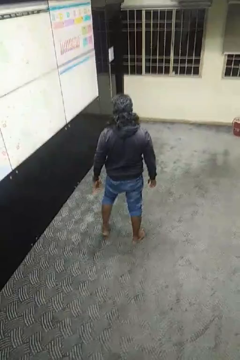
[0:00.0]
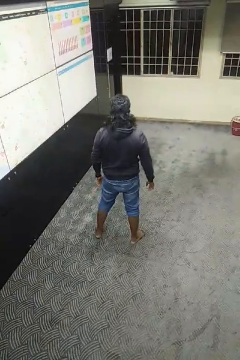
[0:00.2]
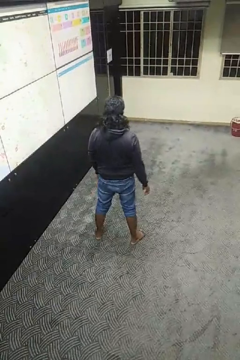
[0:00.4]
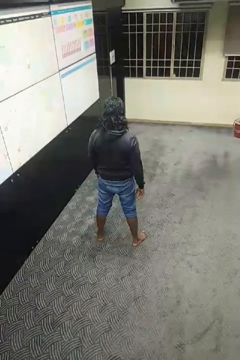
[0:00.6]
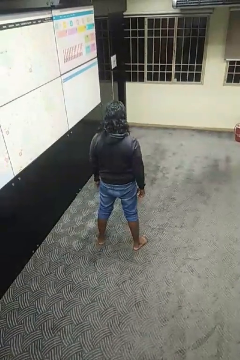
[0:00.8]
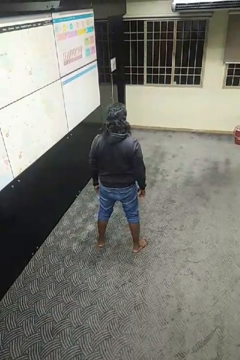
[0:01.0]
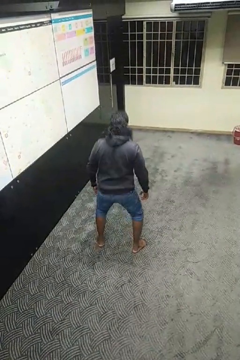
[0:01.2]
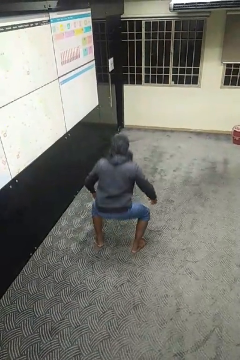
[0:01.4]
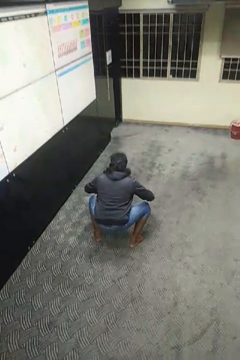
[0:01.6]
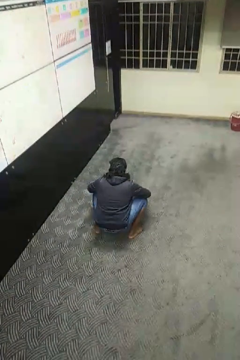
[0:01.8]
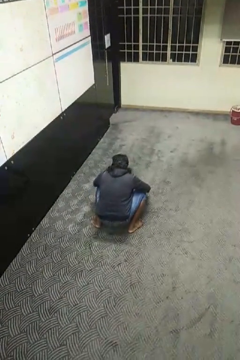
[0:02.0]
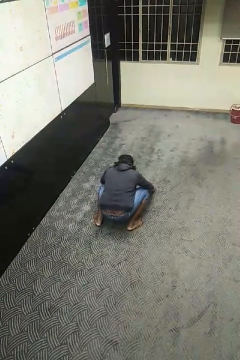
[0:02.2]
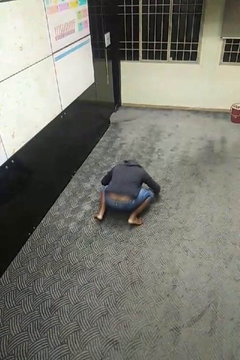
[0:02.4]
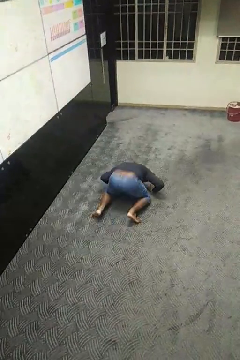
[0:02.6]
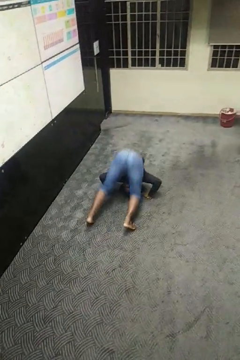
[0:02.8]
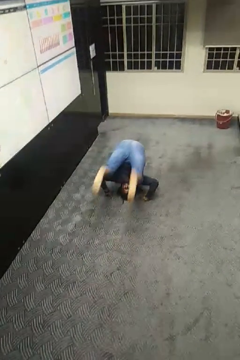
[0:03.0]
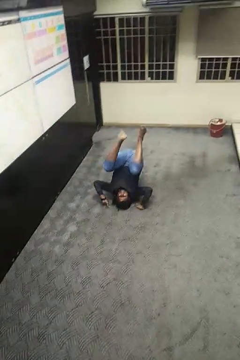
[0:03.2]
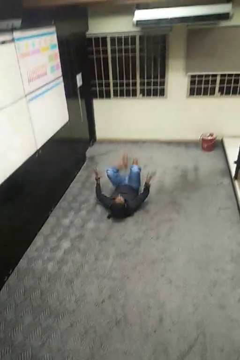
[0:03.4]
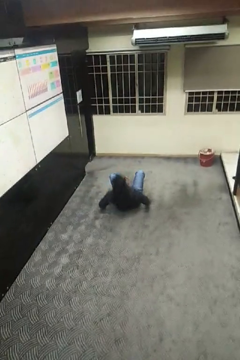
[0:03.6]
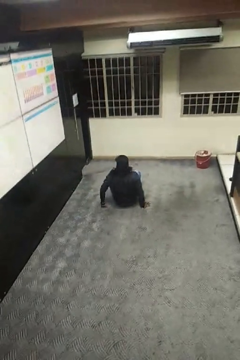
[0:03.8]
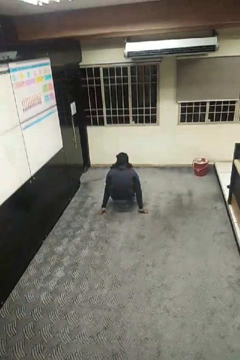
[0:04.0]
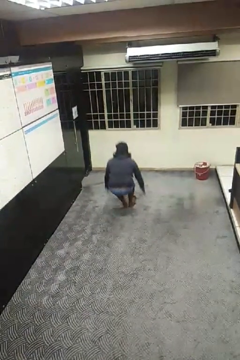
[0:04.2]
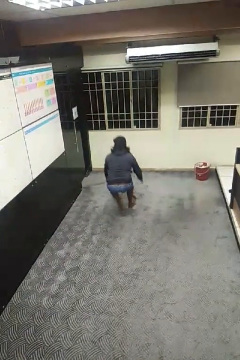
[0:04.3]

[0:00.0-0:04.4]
person somersaults

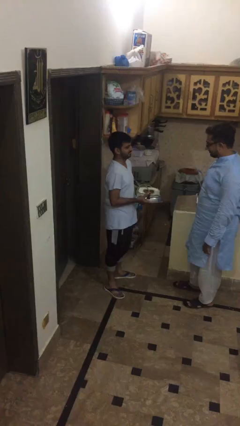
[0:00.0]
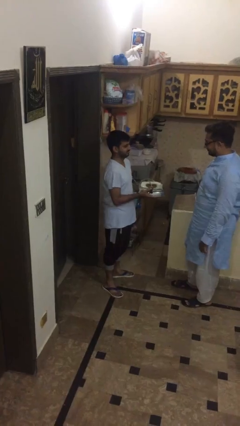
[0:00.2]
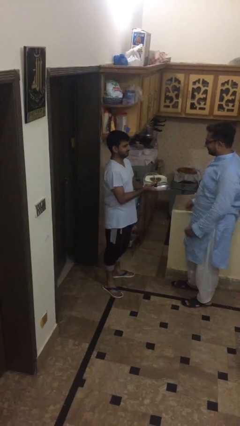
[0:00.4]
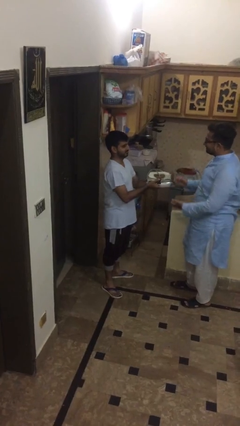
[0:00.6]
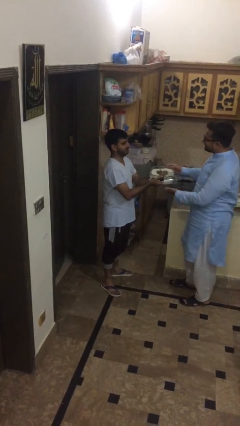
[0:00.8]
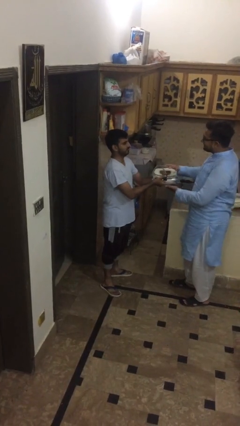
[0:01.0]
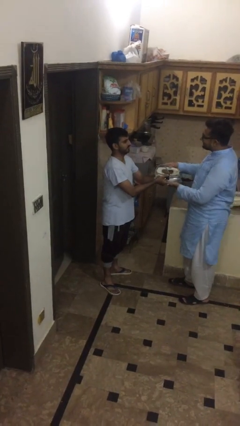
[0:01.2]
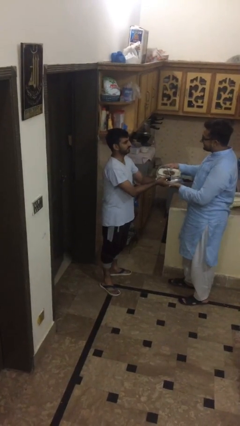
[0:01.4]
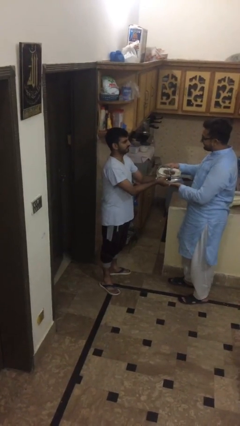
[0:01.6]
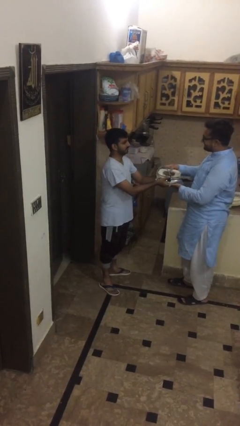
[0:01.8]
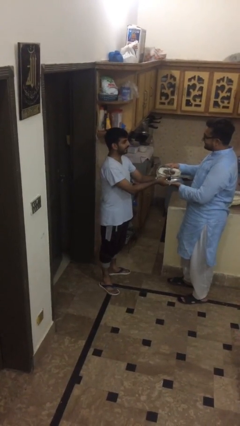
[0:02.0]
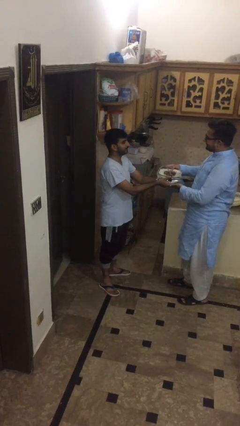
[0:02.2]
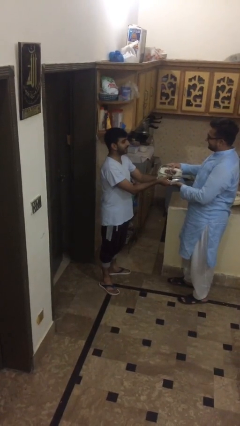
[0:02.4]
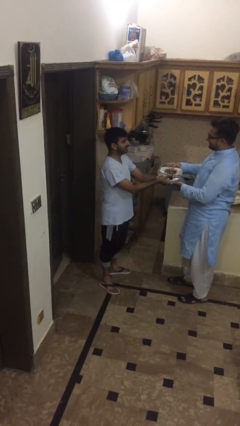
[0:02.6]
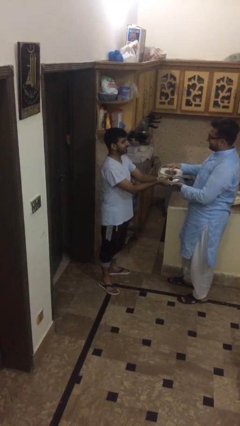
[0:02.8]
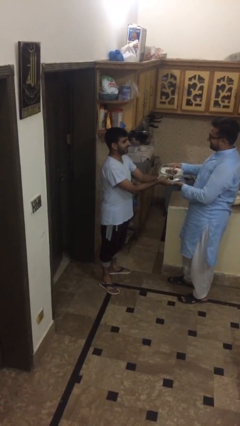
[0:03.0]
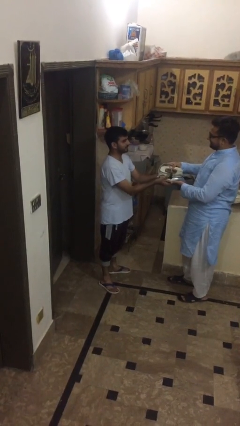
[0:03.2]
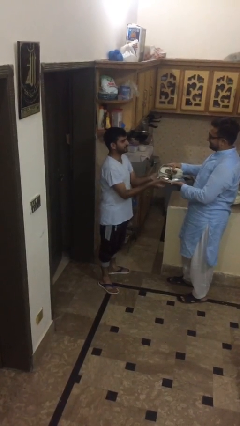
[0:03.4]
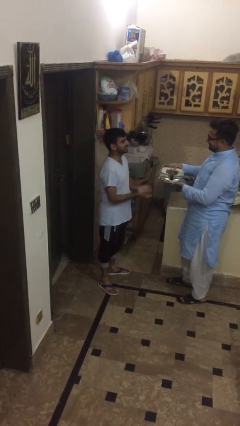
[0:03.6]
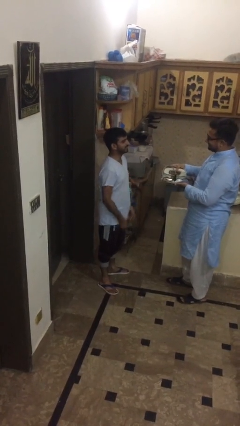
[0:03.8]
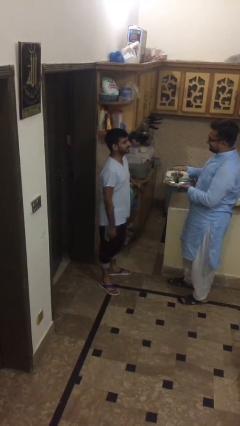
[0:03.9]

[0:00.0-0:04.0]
person transfers object to person

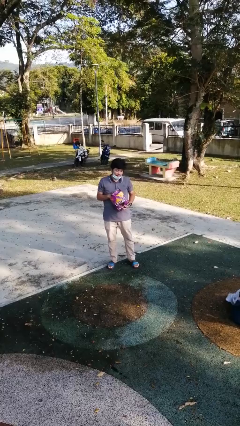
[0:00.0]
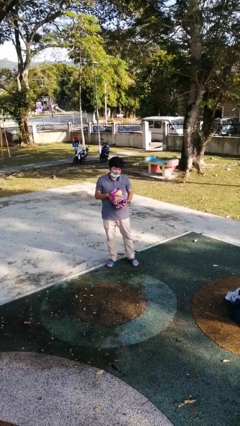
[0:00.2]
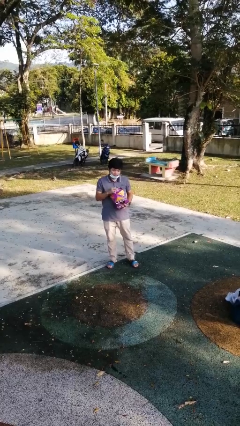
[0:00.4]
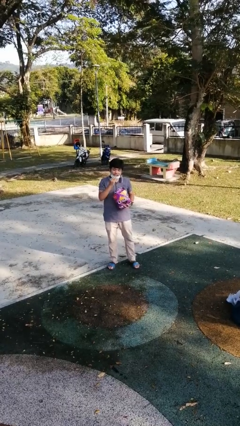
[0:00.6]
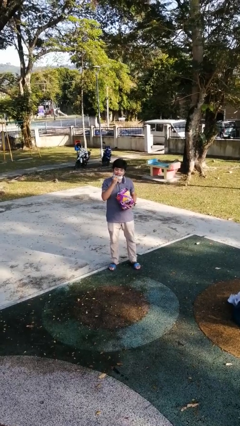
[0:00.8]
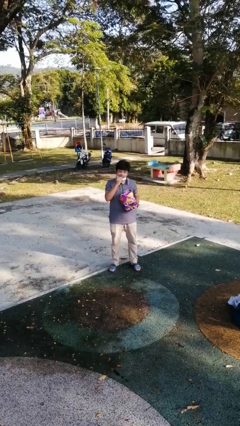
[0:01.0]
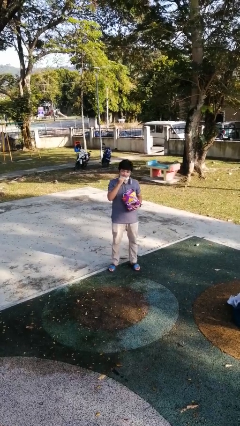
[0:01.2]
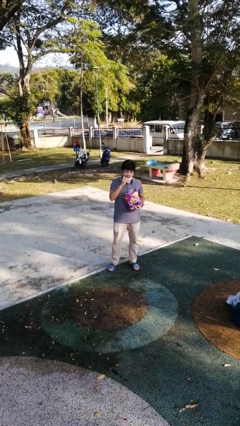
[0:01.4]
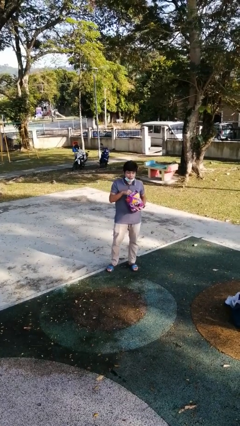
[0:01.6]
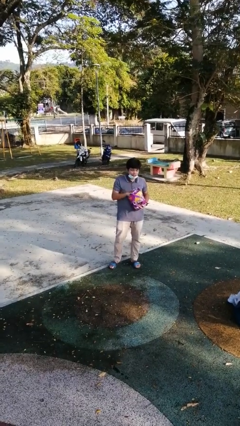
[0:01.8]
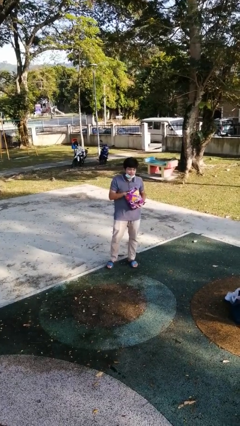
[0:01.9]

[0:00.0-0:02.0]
person eats snack from bag

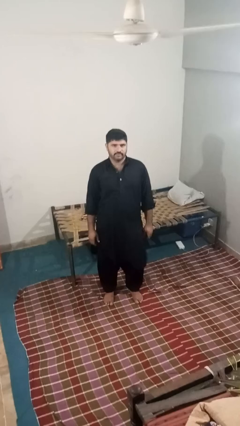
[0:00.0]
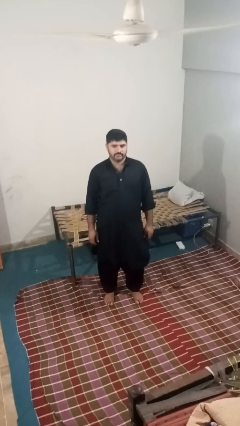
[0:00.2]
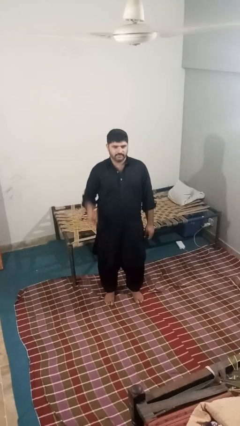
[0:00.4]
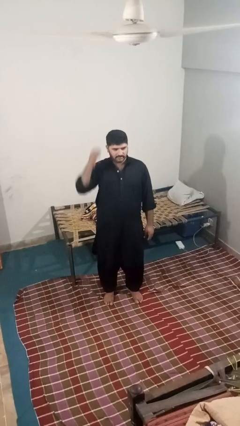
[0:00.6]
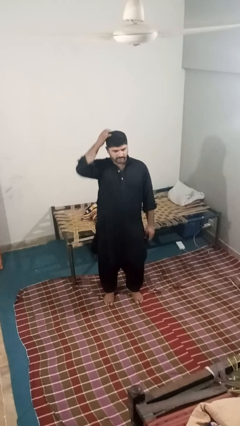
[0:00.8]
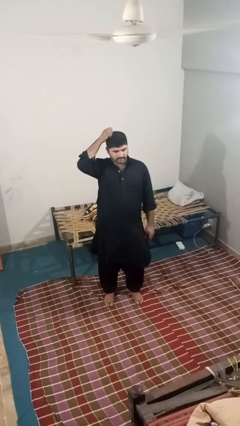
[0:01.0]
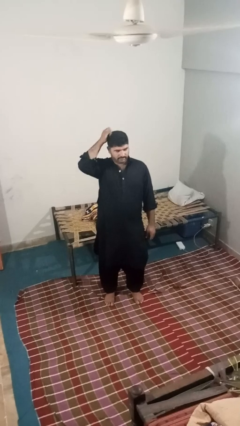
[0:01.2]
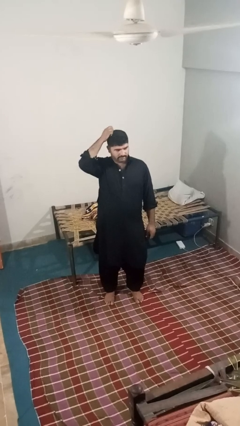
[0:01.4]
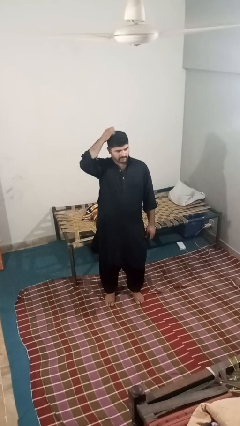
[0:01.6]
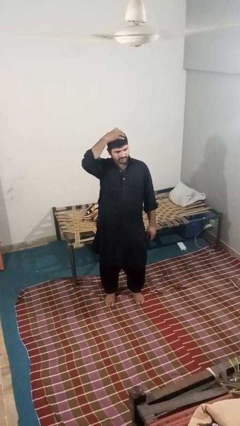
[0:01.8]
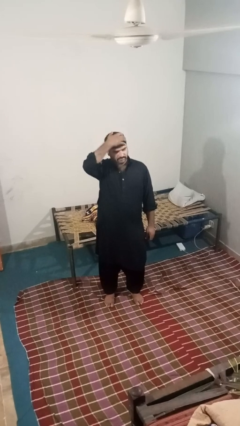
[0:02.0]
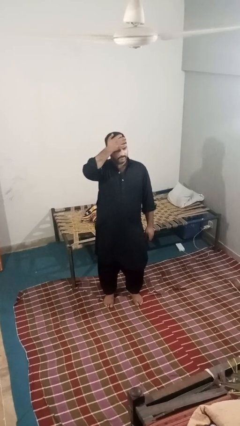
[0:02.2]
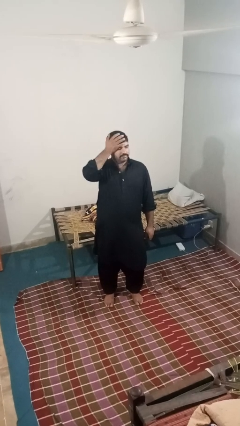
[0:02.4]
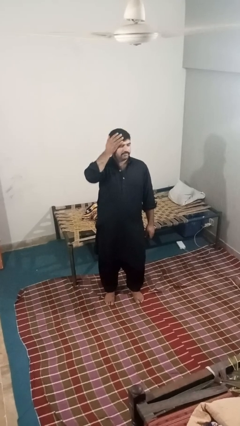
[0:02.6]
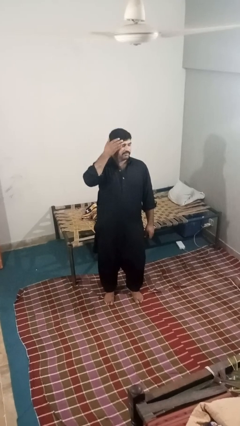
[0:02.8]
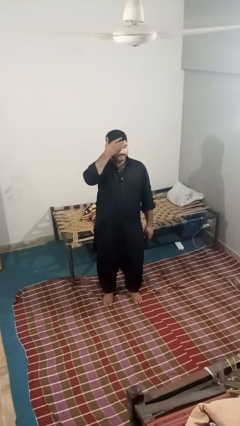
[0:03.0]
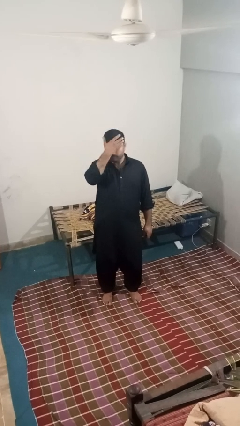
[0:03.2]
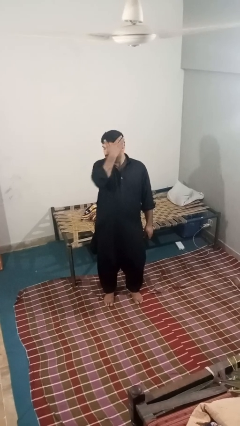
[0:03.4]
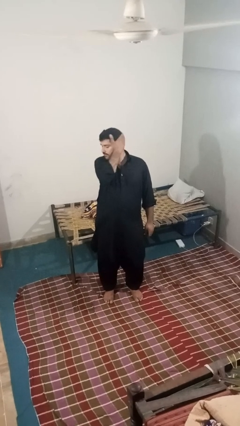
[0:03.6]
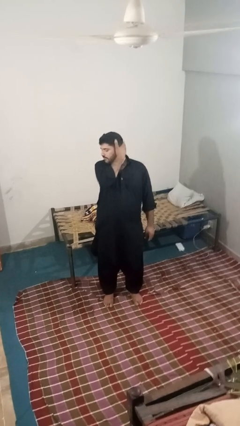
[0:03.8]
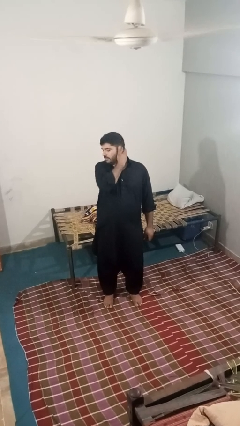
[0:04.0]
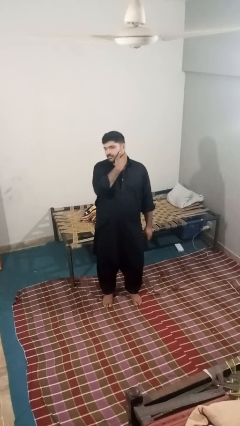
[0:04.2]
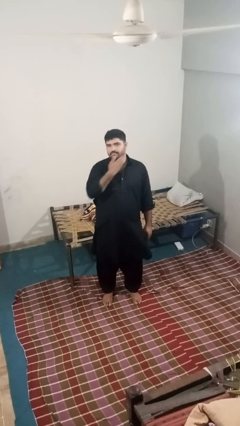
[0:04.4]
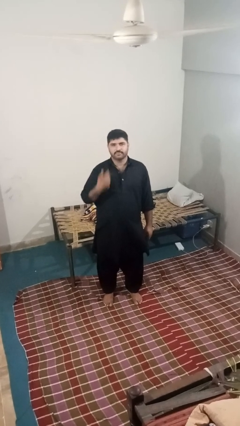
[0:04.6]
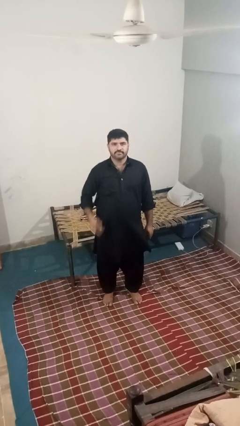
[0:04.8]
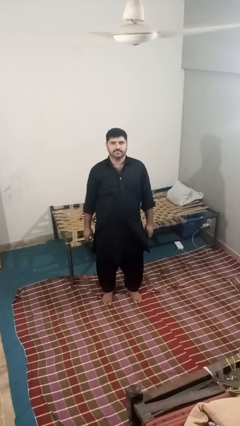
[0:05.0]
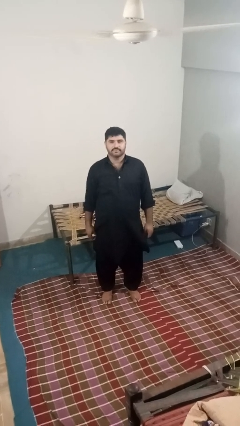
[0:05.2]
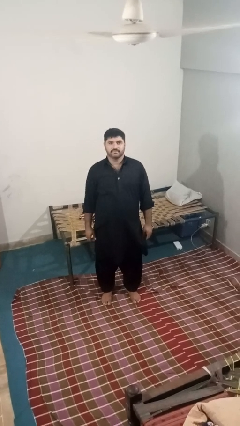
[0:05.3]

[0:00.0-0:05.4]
person scratches face

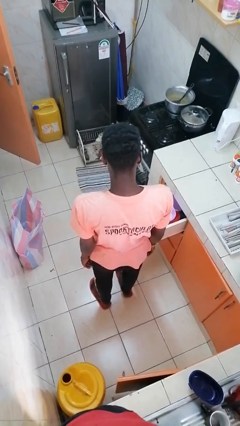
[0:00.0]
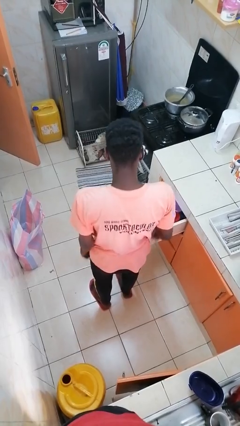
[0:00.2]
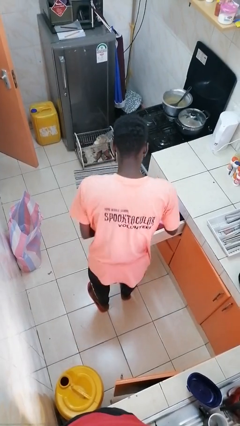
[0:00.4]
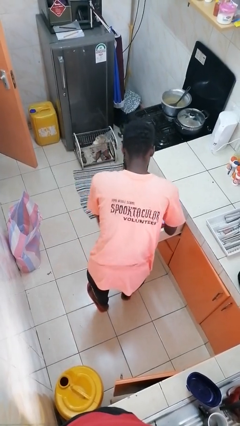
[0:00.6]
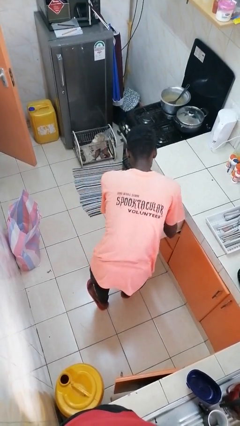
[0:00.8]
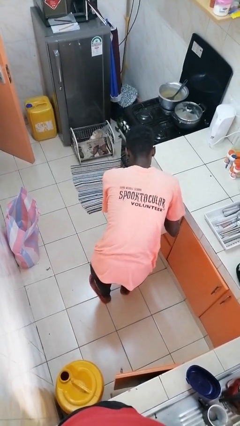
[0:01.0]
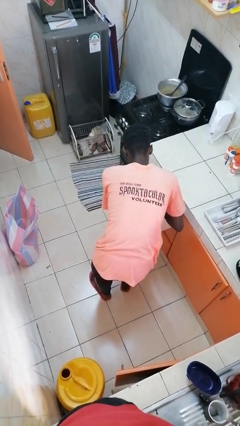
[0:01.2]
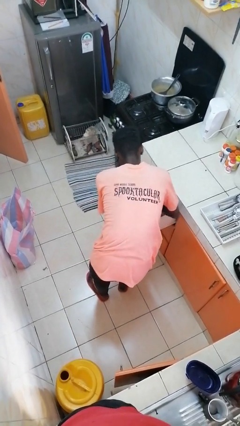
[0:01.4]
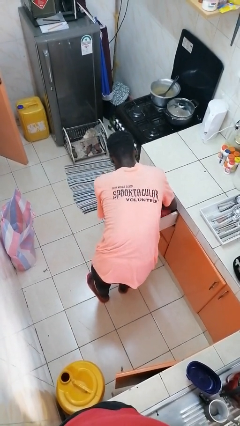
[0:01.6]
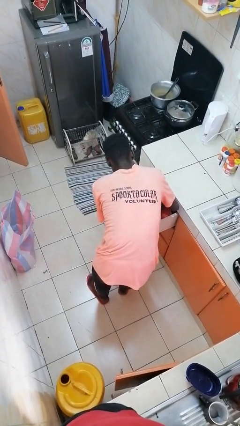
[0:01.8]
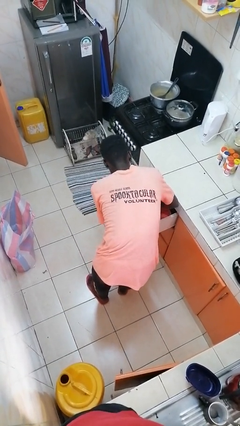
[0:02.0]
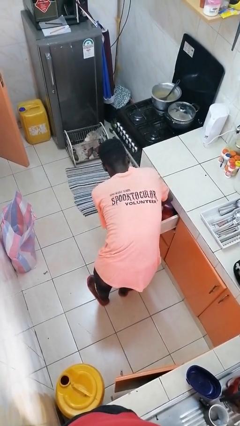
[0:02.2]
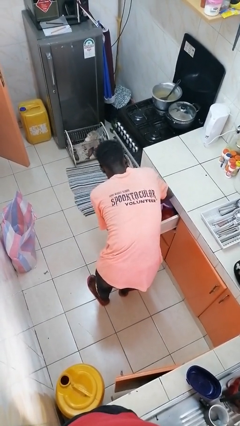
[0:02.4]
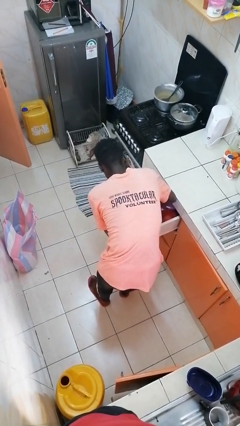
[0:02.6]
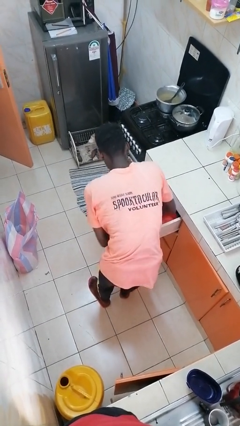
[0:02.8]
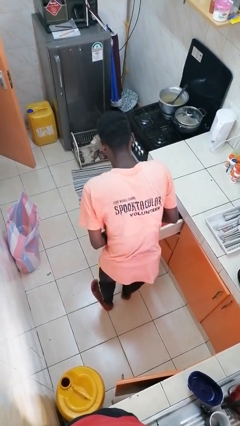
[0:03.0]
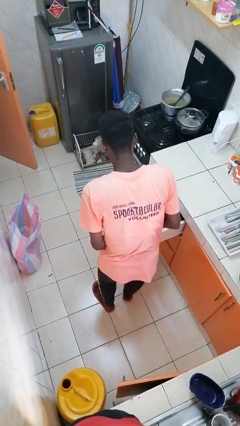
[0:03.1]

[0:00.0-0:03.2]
person searches in kitchen drawer
